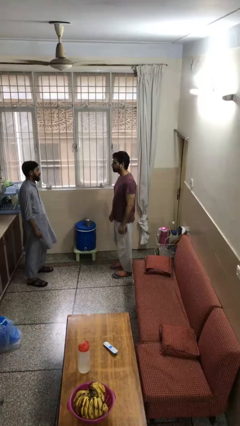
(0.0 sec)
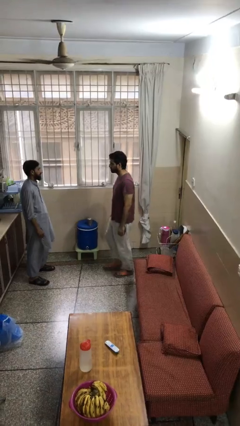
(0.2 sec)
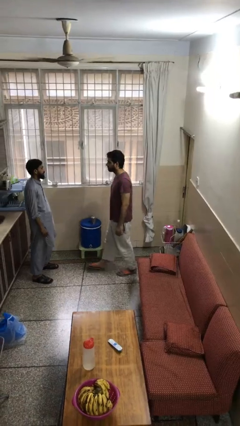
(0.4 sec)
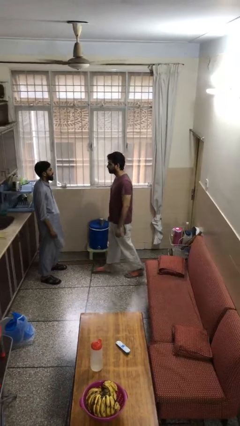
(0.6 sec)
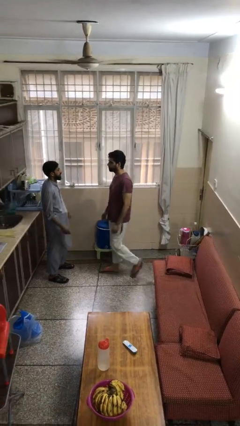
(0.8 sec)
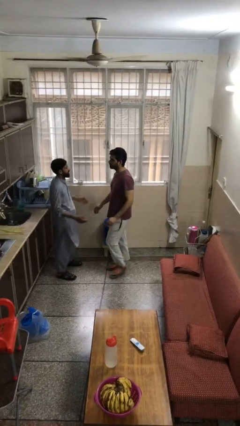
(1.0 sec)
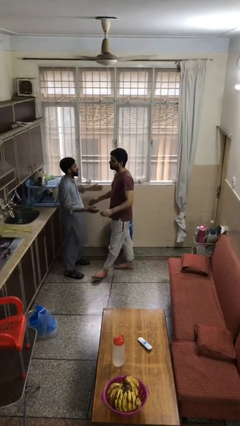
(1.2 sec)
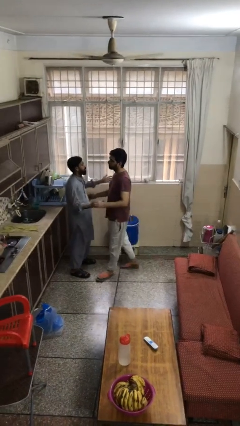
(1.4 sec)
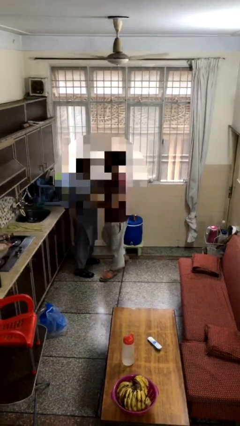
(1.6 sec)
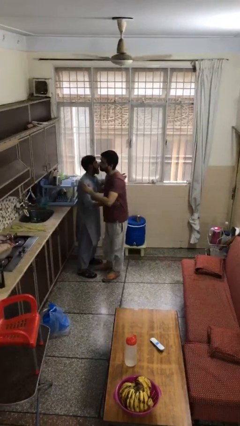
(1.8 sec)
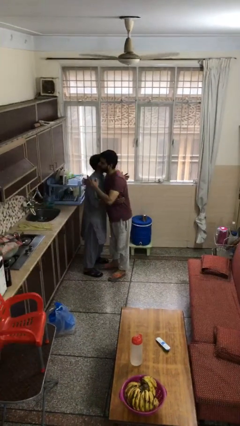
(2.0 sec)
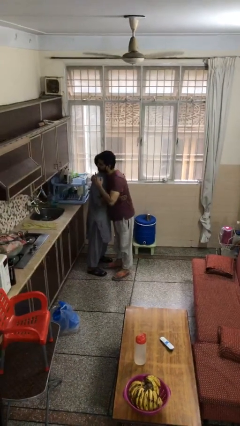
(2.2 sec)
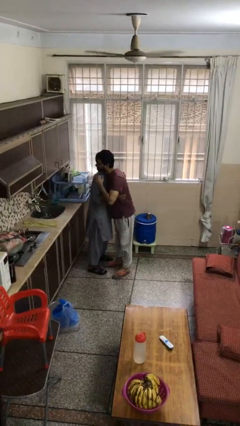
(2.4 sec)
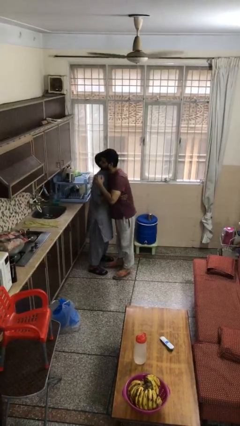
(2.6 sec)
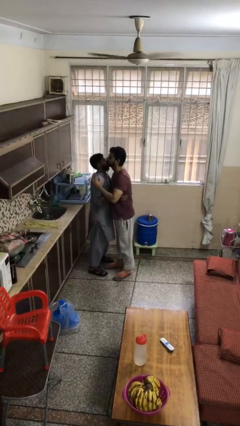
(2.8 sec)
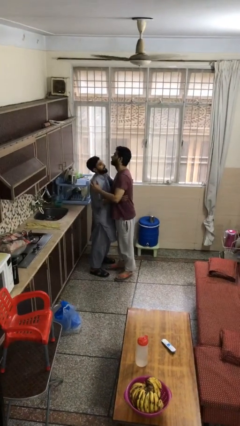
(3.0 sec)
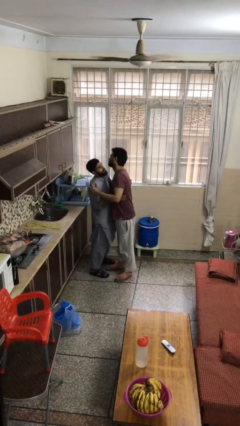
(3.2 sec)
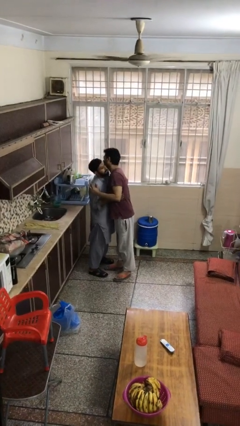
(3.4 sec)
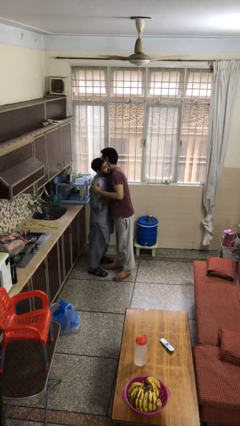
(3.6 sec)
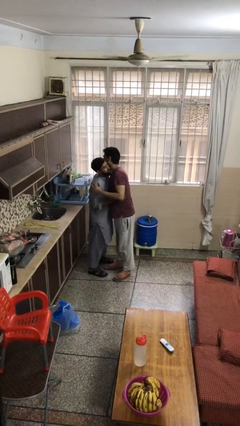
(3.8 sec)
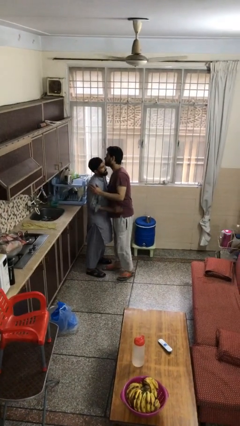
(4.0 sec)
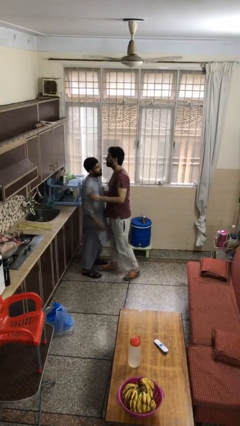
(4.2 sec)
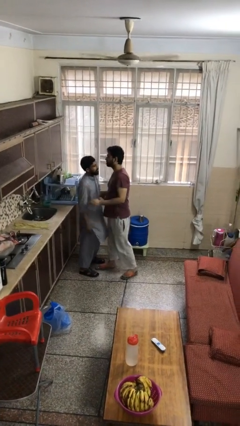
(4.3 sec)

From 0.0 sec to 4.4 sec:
person embraces person

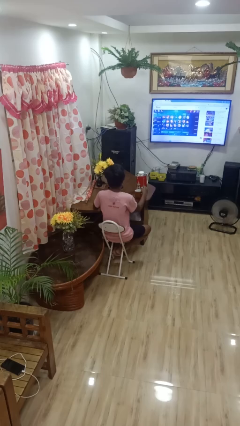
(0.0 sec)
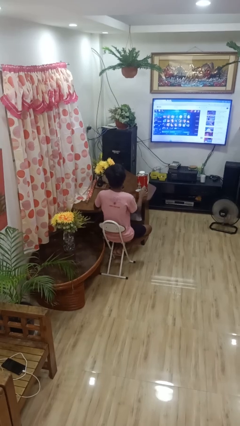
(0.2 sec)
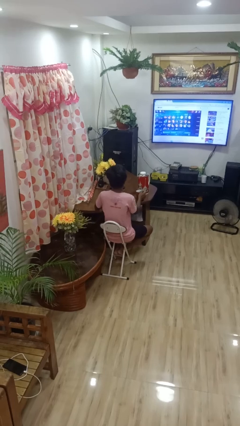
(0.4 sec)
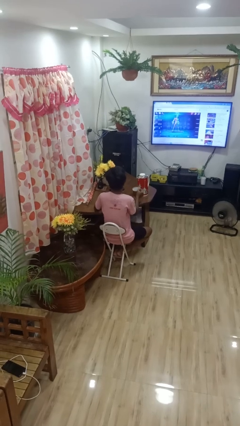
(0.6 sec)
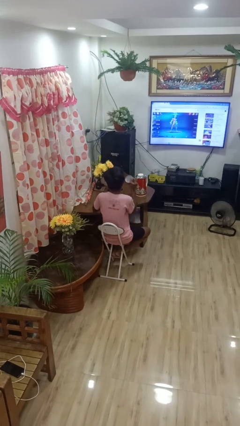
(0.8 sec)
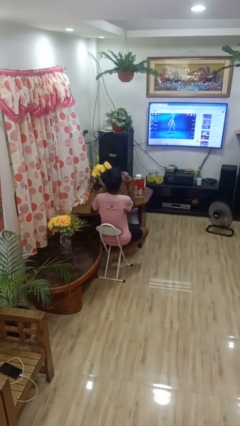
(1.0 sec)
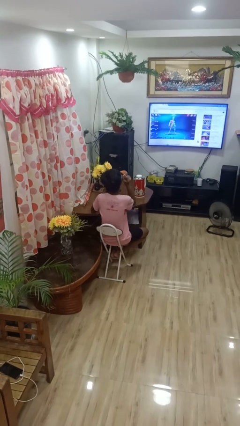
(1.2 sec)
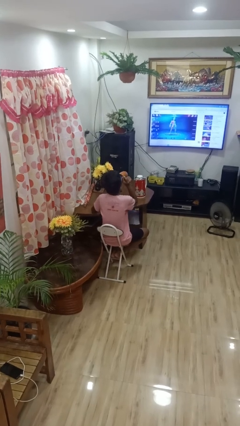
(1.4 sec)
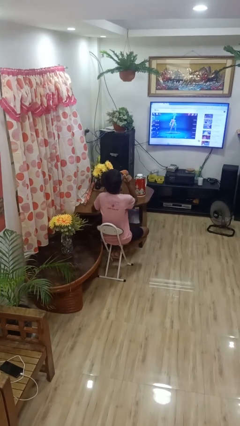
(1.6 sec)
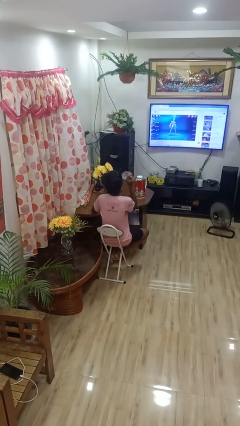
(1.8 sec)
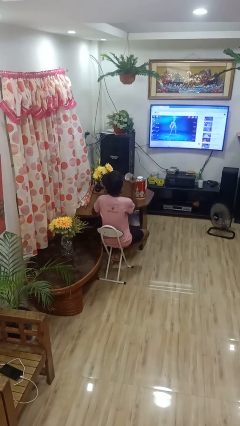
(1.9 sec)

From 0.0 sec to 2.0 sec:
person drinks from mug

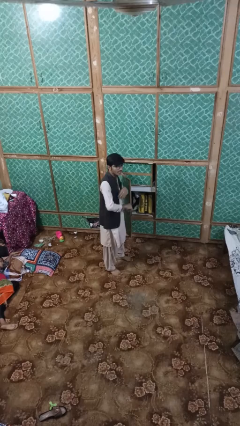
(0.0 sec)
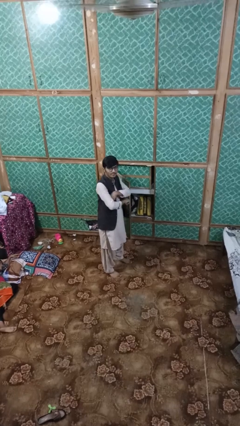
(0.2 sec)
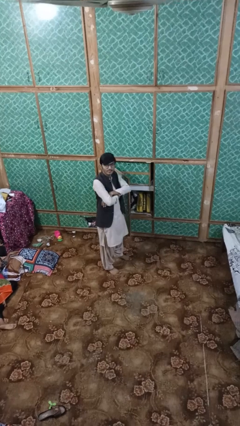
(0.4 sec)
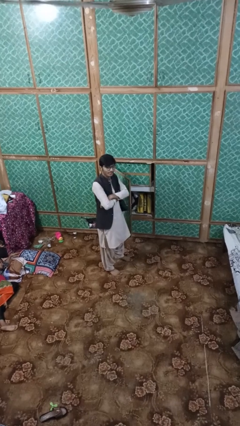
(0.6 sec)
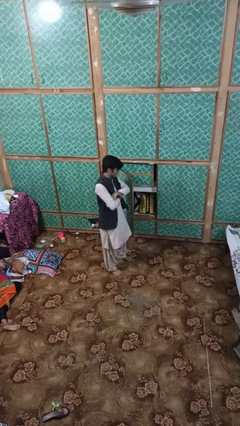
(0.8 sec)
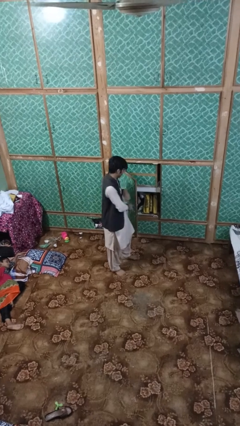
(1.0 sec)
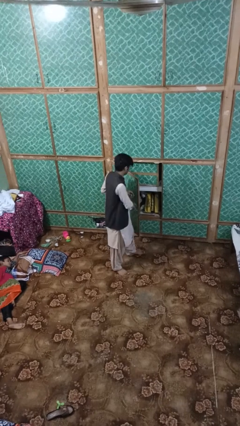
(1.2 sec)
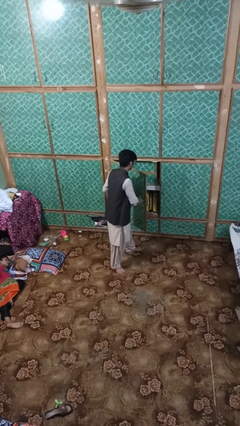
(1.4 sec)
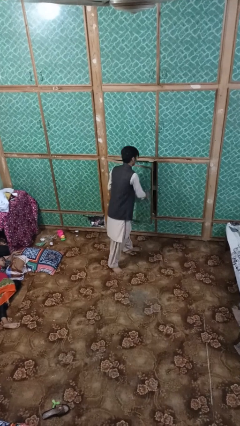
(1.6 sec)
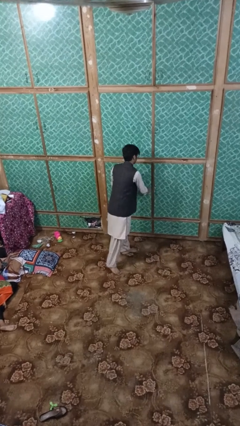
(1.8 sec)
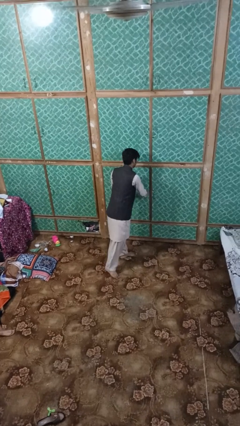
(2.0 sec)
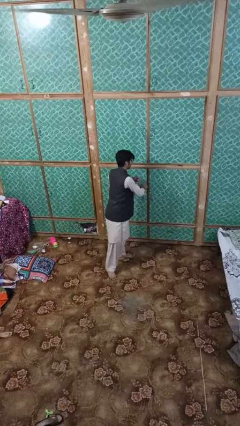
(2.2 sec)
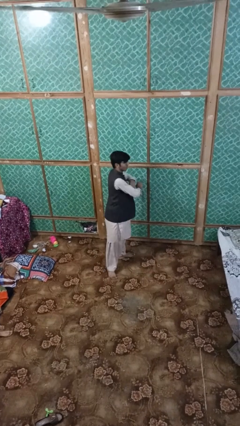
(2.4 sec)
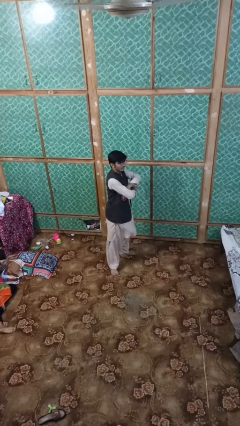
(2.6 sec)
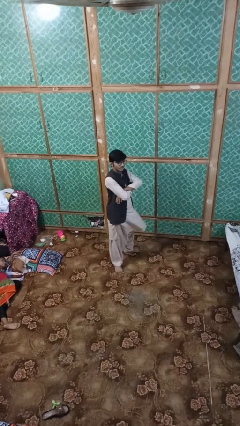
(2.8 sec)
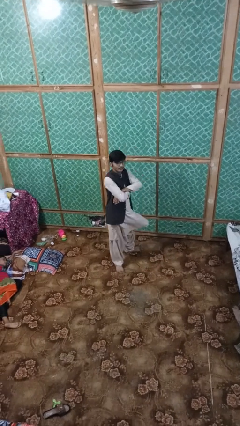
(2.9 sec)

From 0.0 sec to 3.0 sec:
person closes dresser drawer

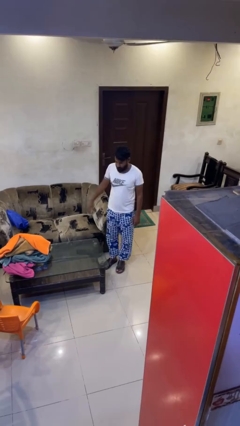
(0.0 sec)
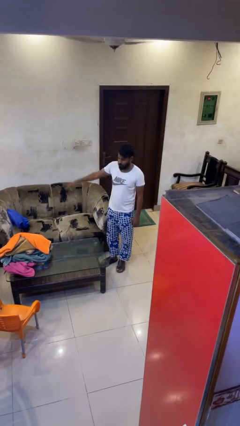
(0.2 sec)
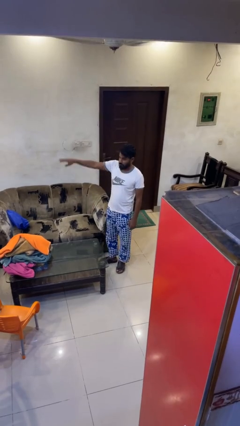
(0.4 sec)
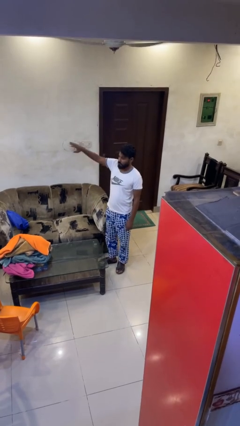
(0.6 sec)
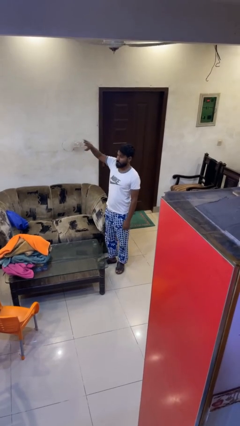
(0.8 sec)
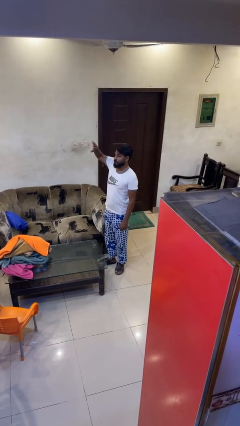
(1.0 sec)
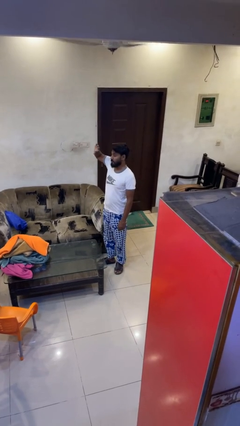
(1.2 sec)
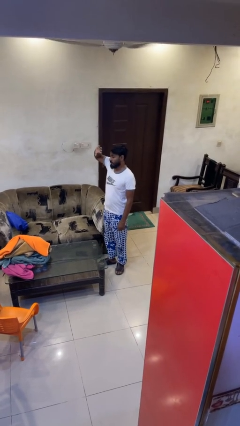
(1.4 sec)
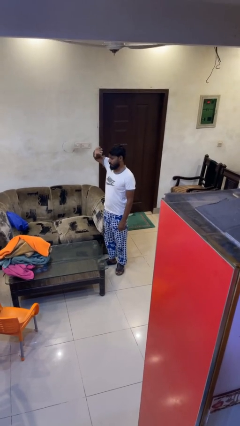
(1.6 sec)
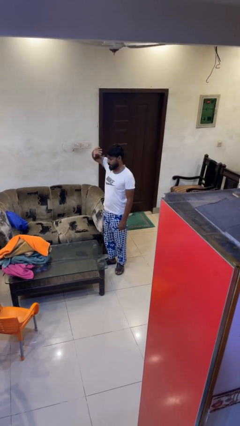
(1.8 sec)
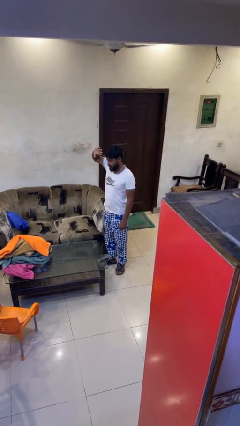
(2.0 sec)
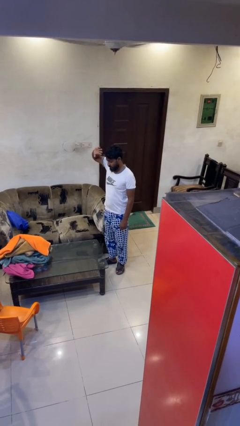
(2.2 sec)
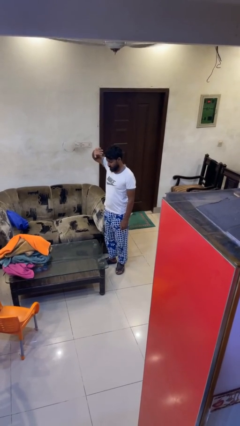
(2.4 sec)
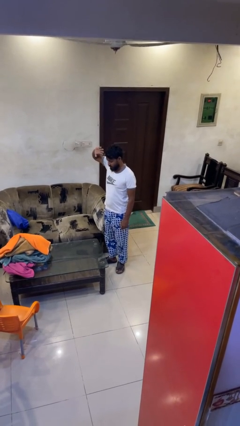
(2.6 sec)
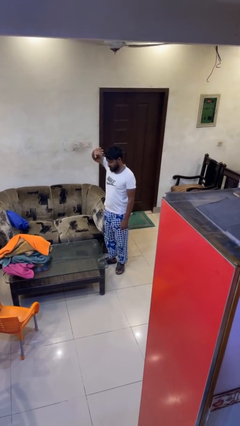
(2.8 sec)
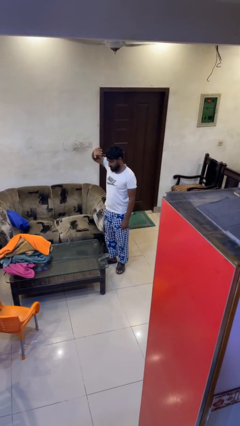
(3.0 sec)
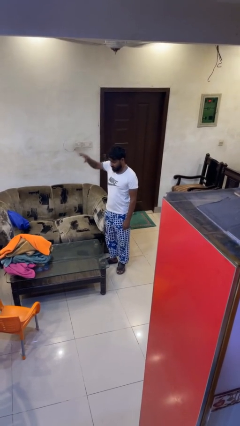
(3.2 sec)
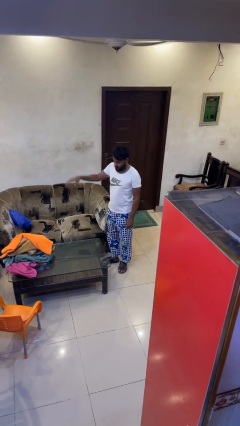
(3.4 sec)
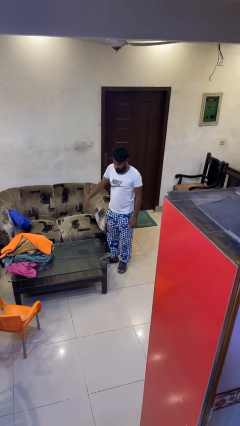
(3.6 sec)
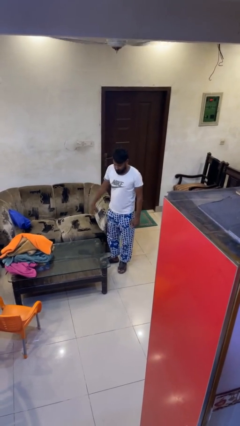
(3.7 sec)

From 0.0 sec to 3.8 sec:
person salutes

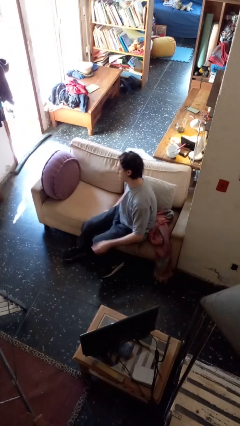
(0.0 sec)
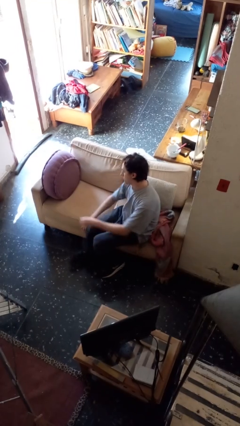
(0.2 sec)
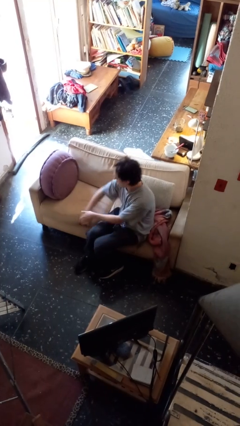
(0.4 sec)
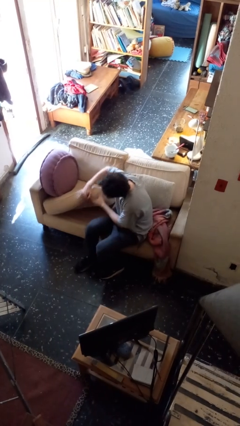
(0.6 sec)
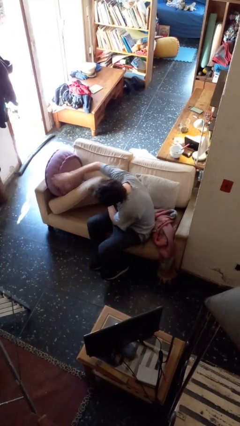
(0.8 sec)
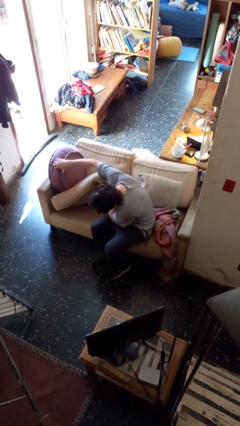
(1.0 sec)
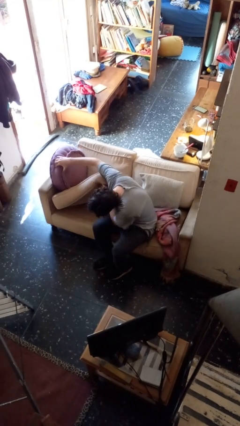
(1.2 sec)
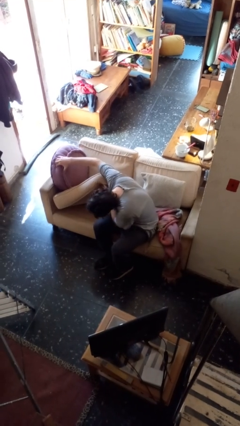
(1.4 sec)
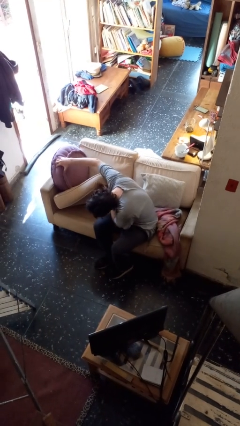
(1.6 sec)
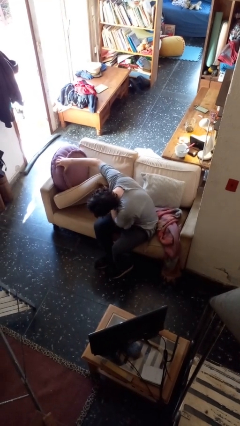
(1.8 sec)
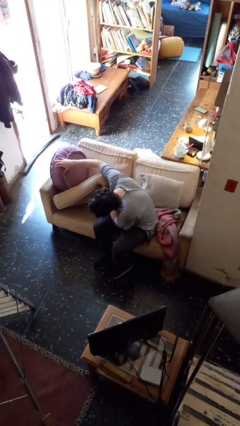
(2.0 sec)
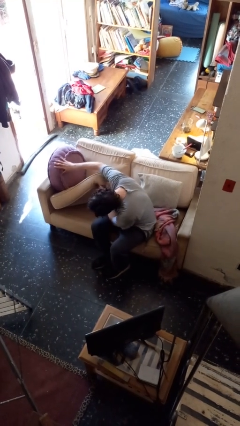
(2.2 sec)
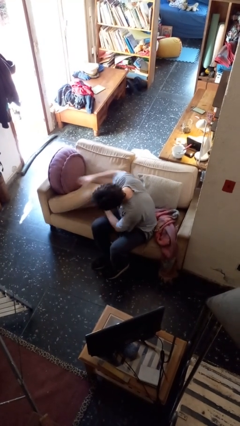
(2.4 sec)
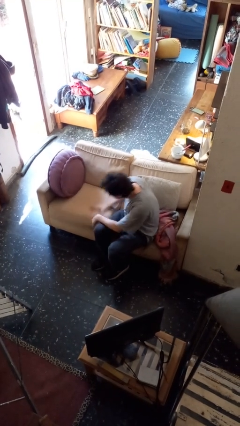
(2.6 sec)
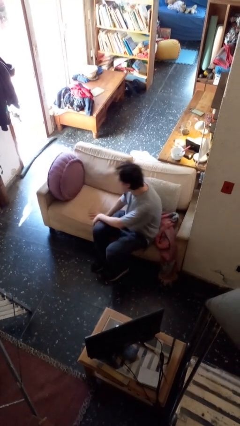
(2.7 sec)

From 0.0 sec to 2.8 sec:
person searches in couch

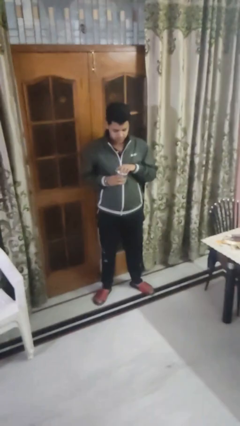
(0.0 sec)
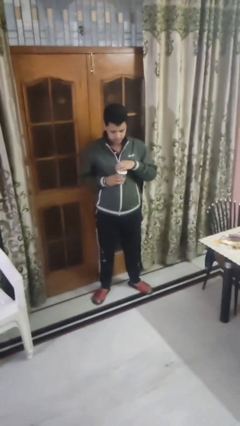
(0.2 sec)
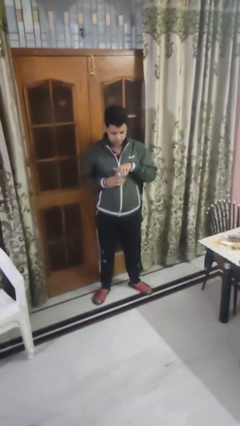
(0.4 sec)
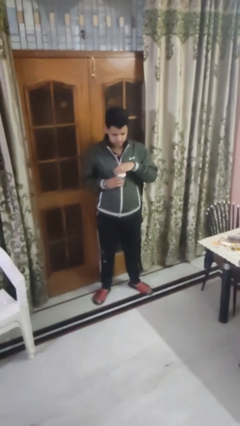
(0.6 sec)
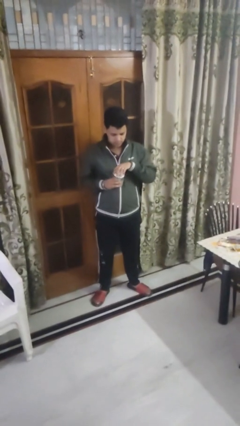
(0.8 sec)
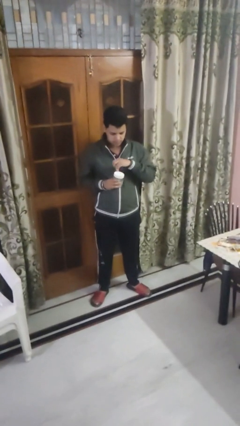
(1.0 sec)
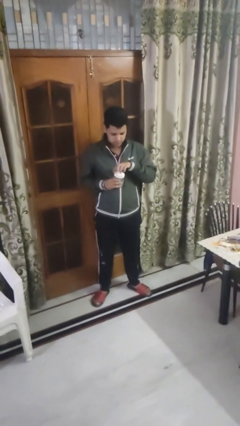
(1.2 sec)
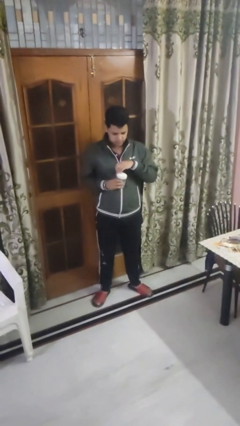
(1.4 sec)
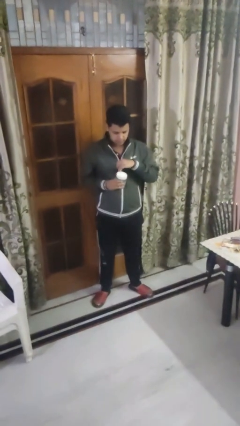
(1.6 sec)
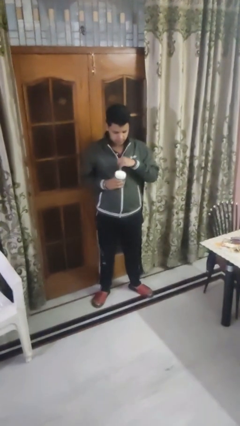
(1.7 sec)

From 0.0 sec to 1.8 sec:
person closes jar
